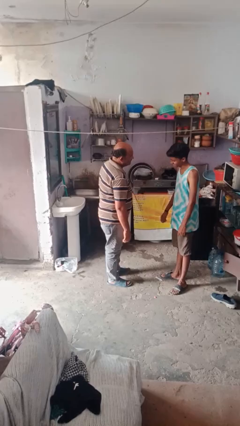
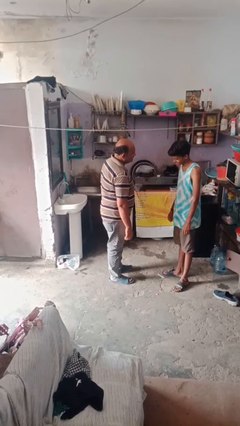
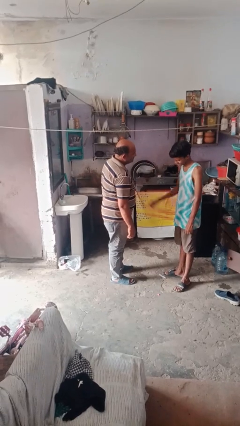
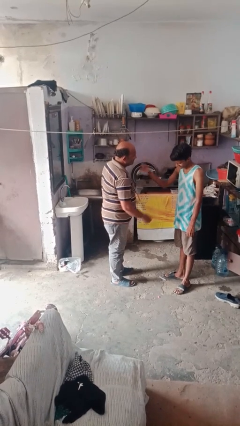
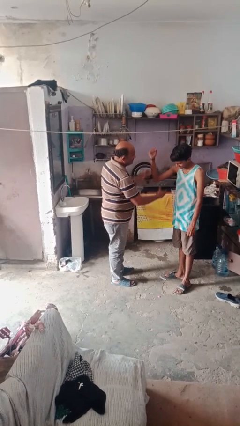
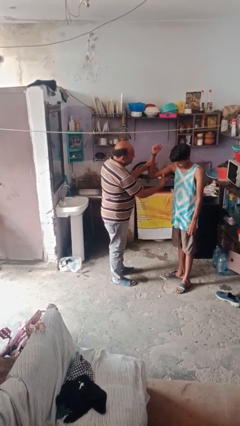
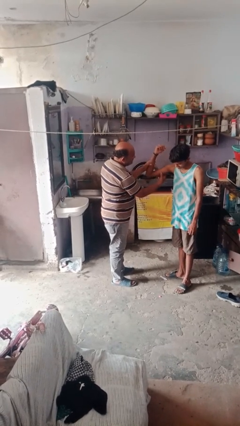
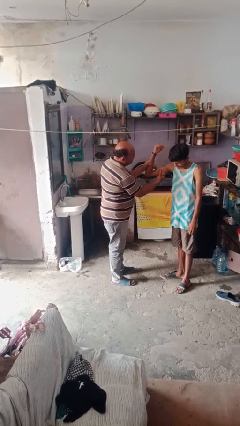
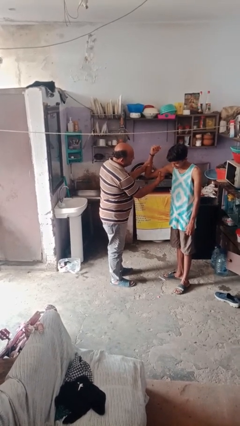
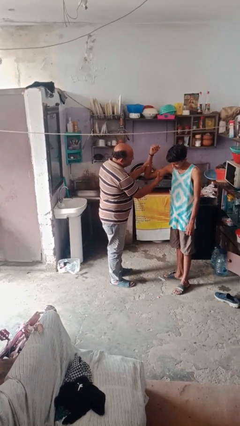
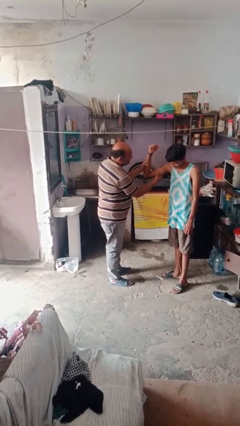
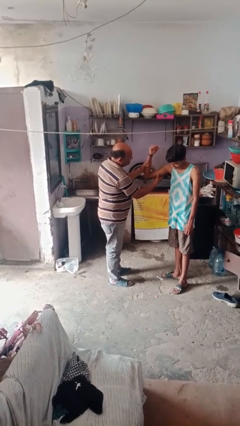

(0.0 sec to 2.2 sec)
person grabs person by bicep

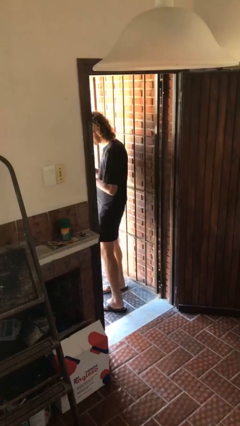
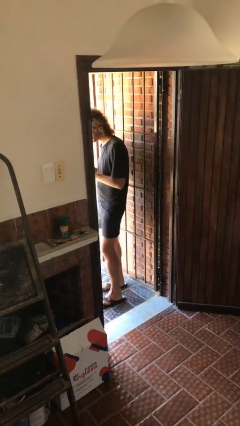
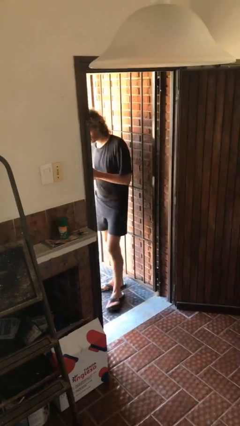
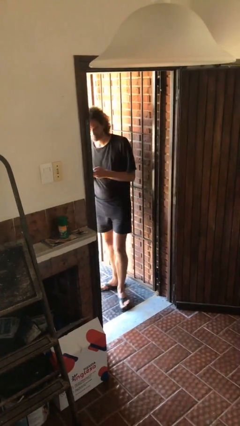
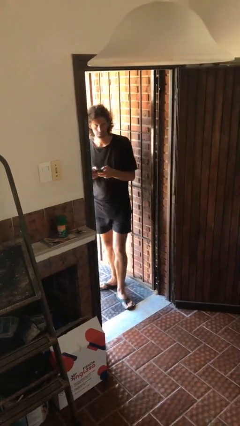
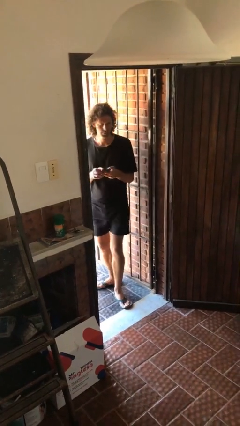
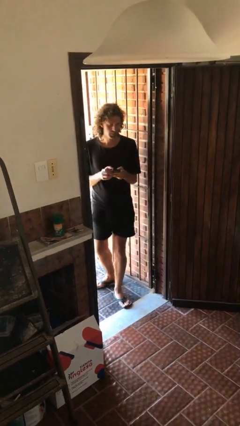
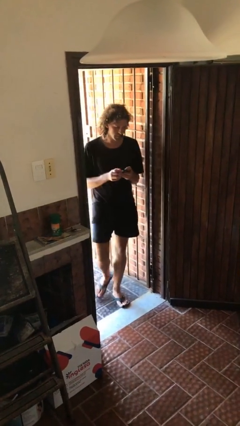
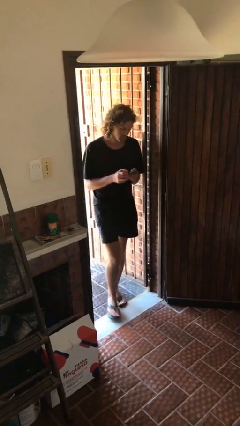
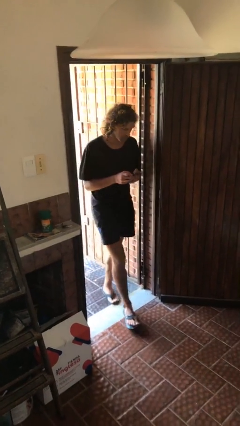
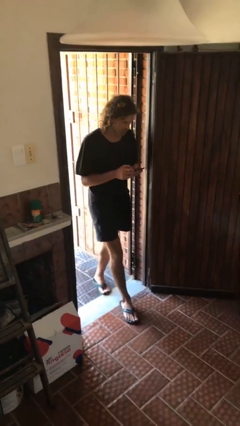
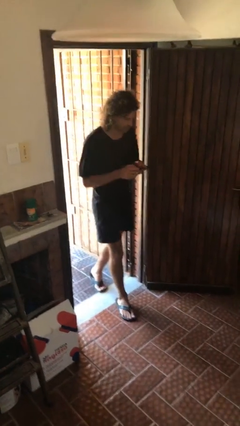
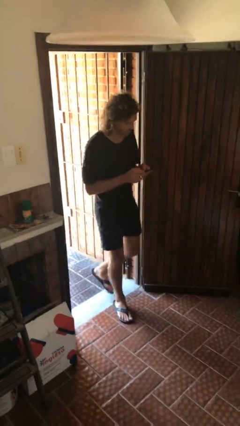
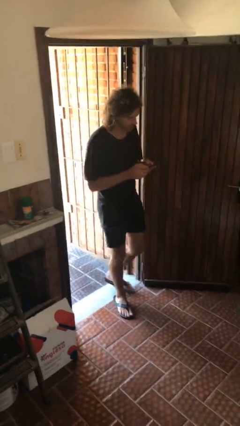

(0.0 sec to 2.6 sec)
person enters scene through structure

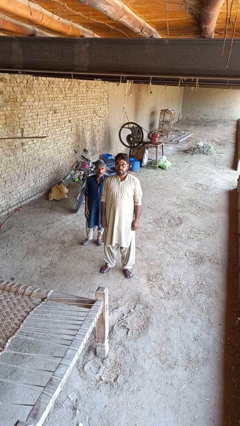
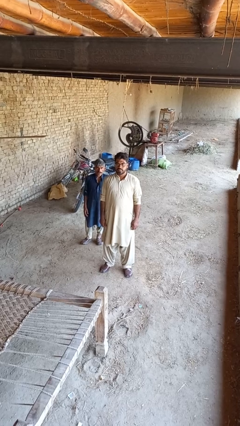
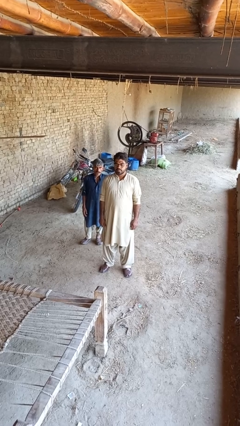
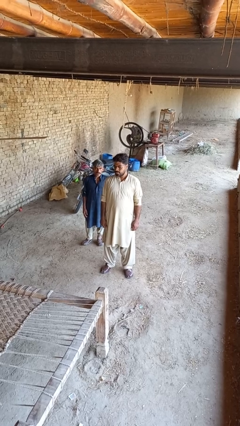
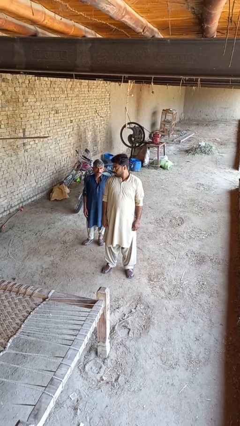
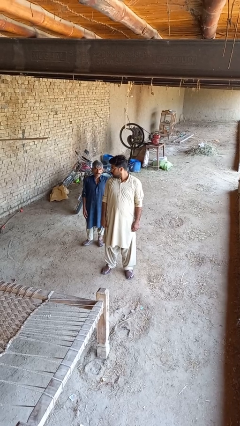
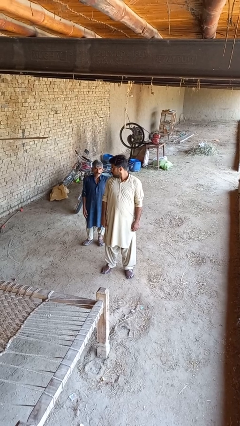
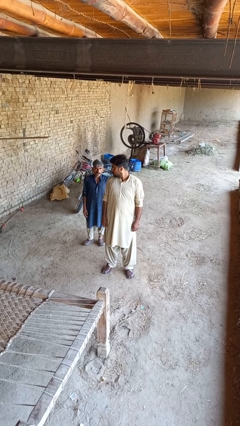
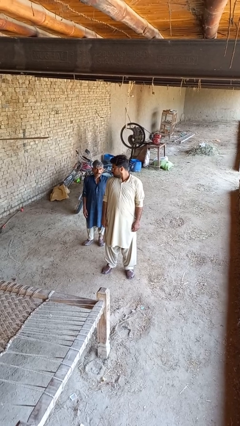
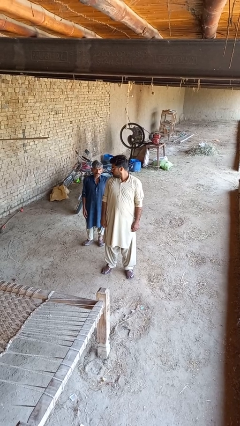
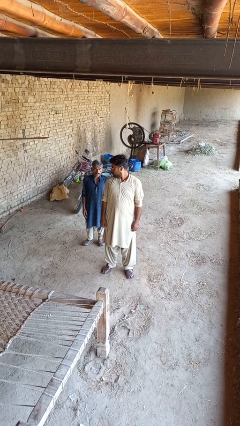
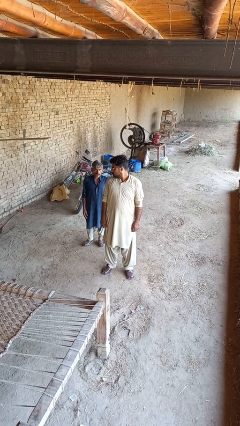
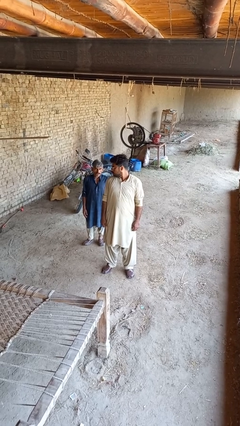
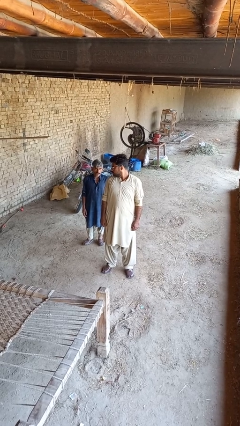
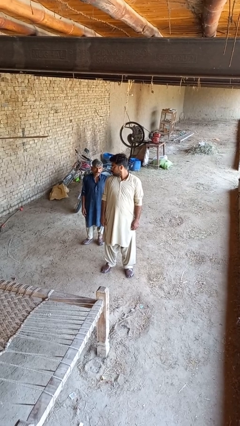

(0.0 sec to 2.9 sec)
person looks over shoulder

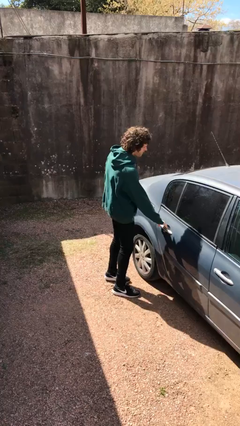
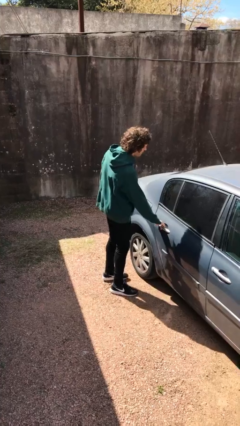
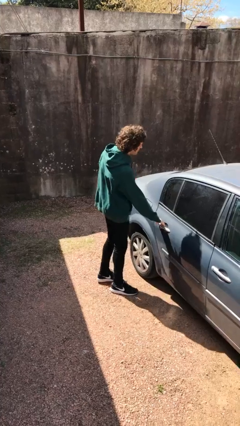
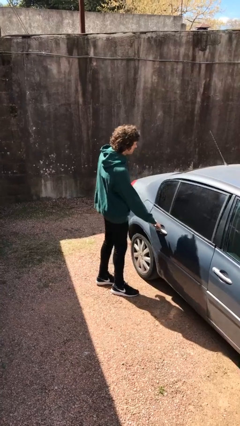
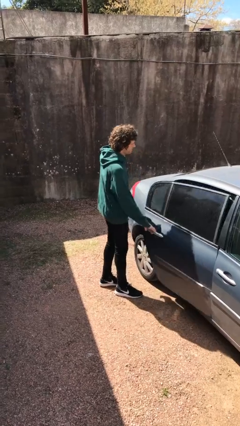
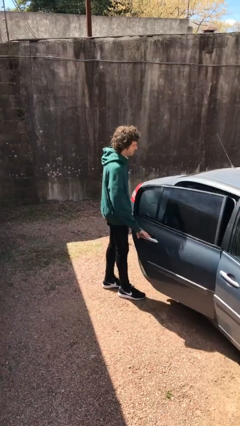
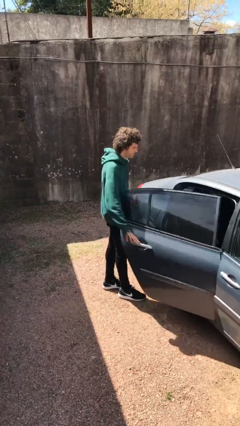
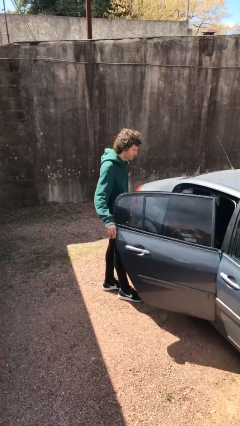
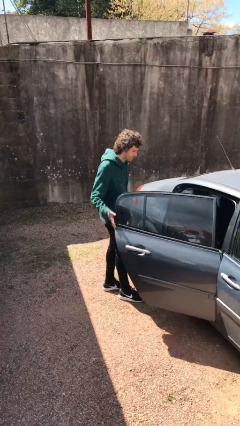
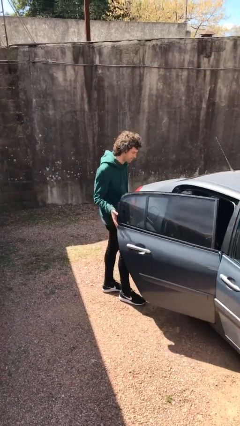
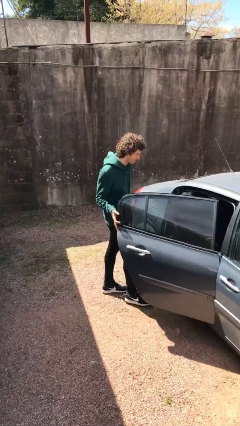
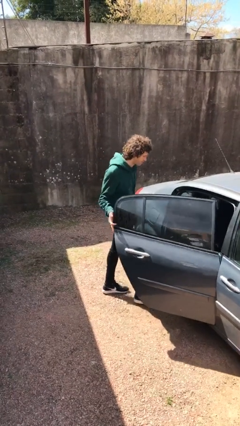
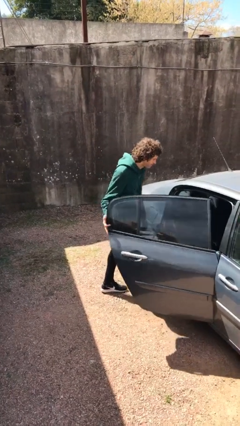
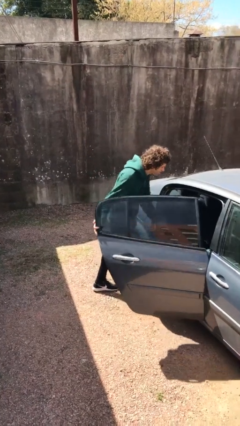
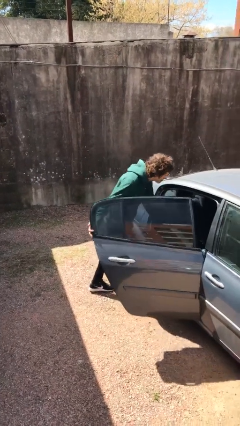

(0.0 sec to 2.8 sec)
person opens car door

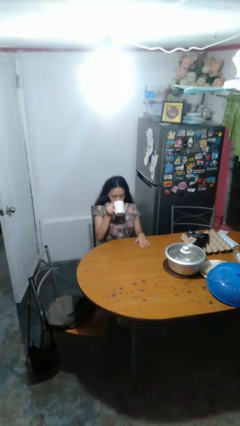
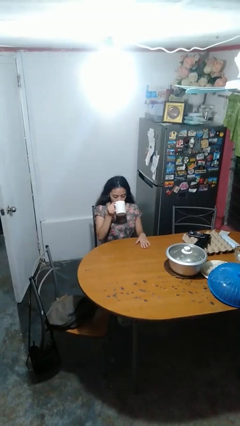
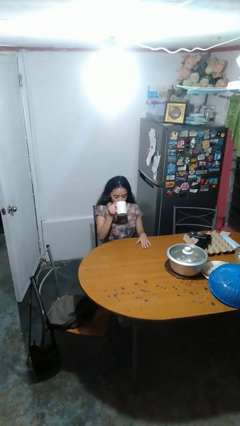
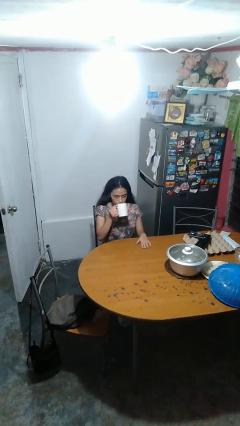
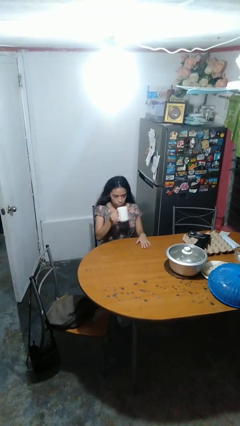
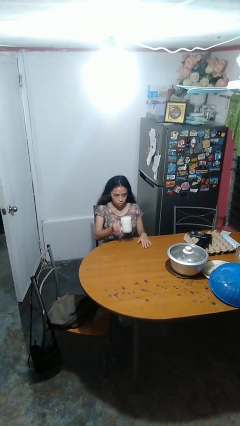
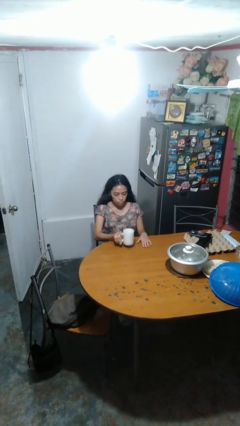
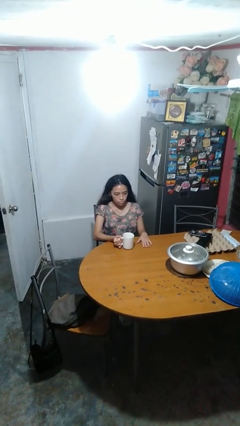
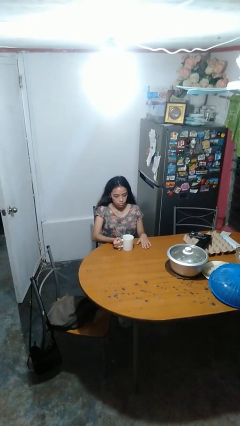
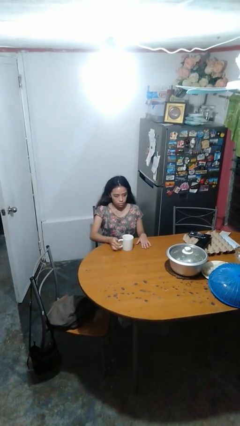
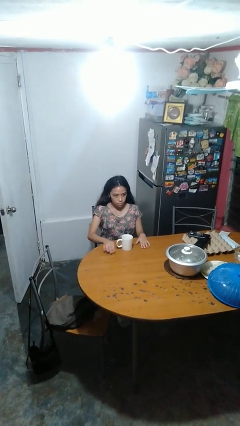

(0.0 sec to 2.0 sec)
person puts down object on table

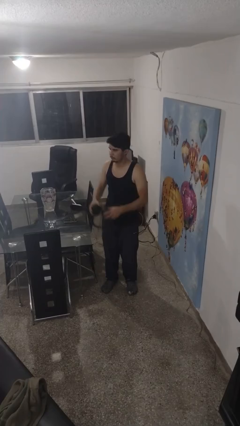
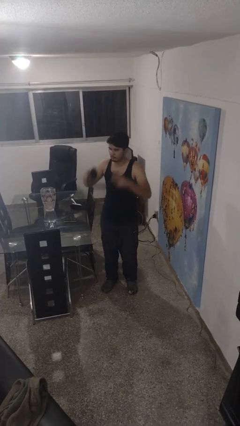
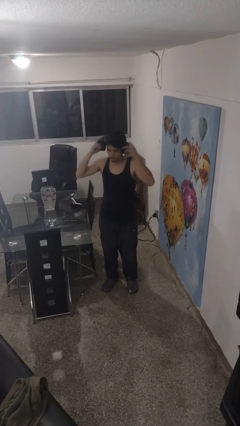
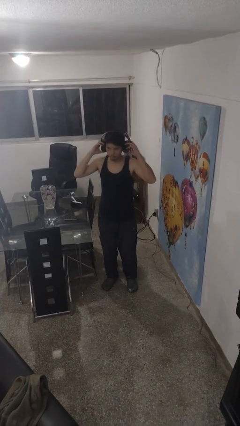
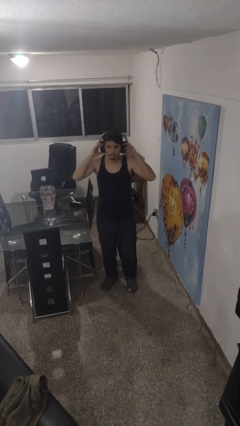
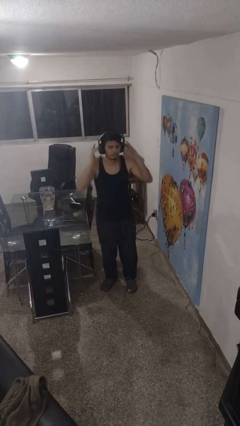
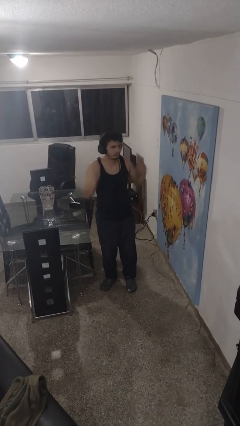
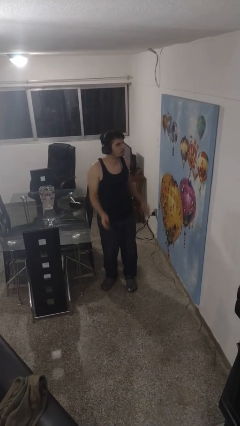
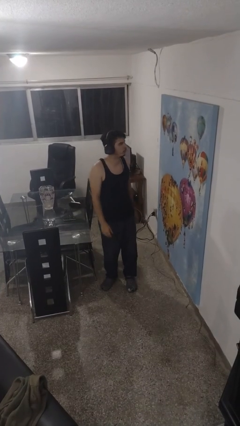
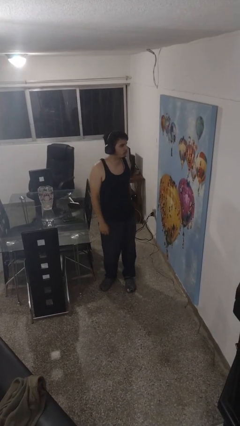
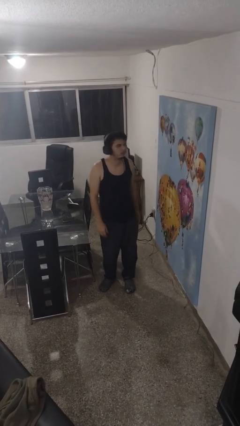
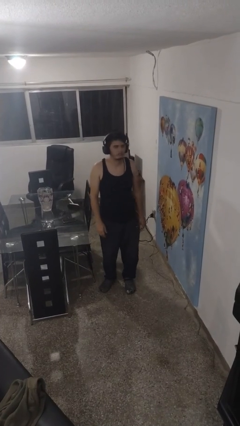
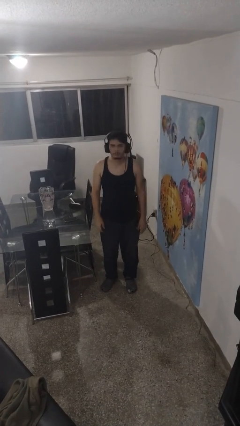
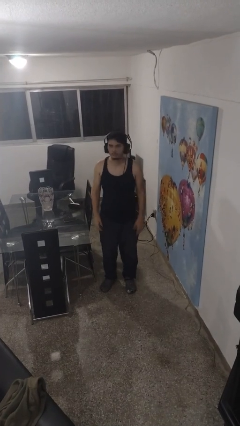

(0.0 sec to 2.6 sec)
person puts on headphones

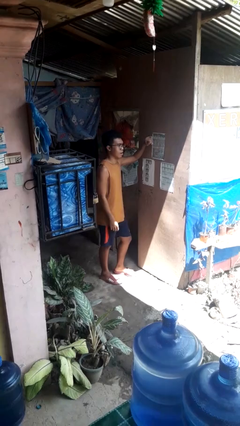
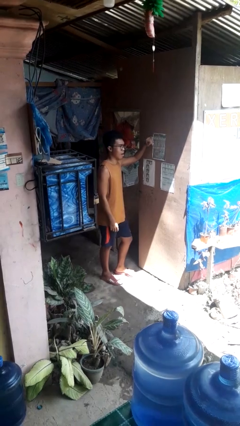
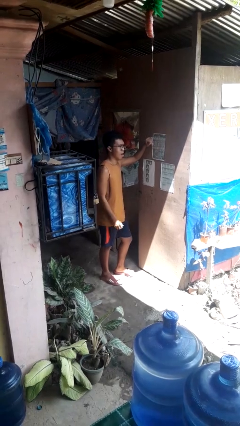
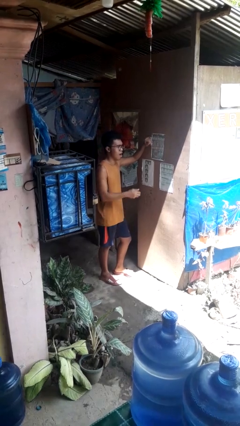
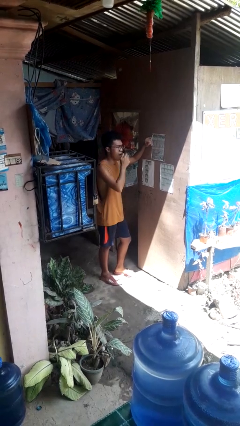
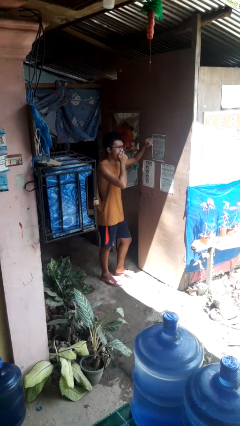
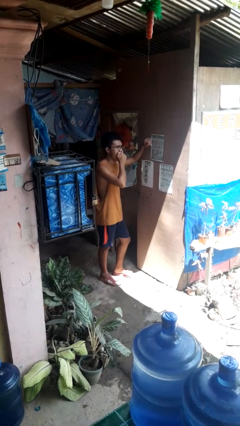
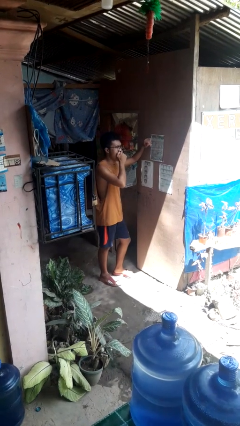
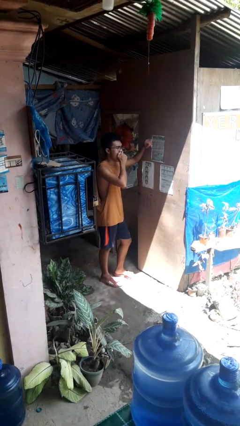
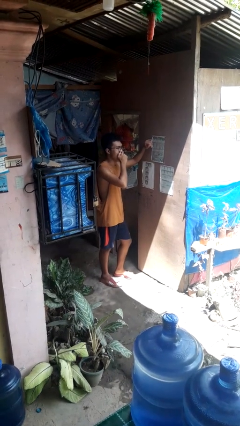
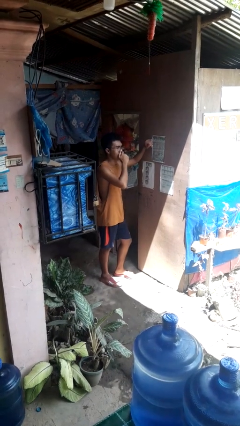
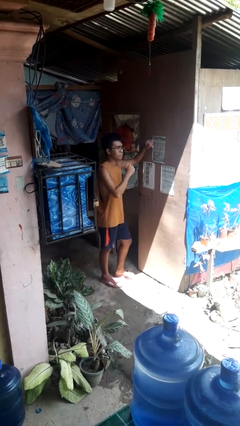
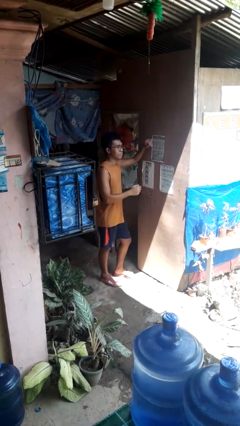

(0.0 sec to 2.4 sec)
person yawns
